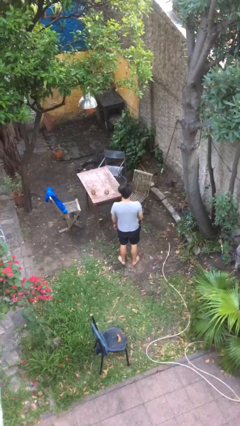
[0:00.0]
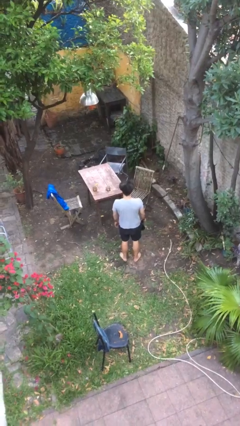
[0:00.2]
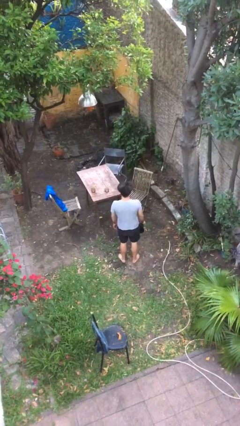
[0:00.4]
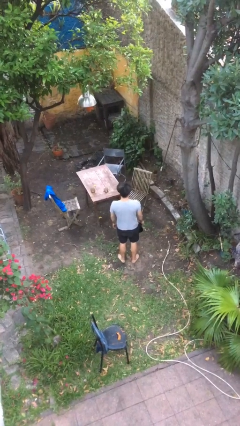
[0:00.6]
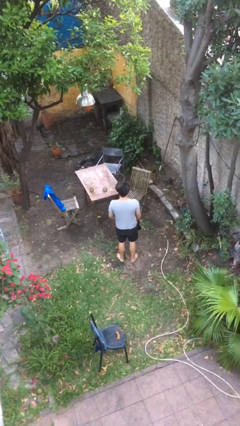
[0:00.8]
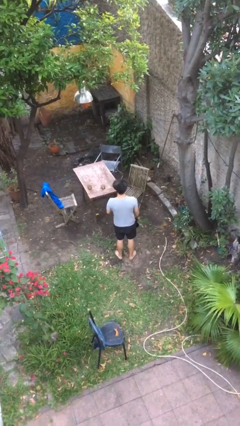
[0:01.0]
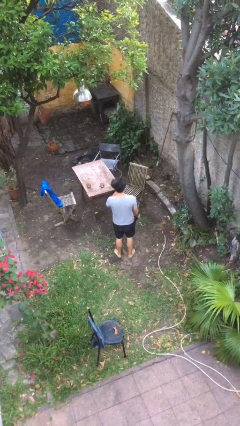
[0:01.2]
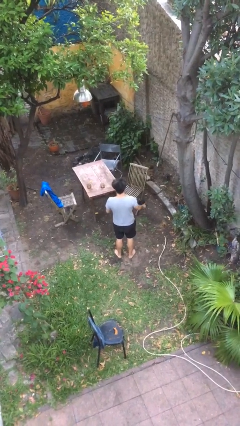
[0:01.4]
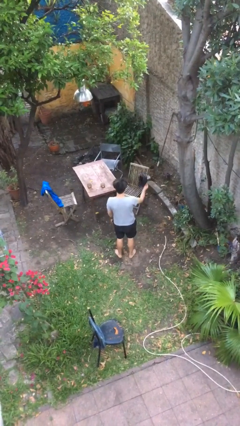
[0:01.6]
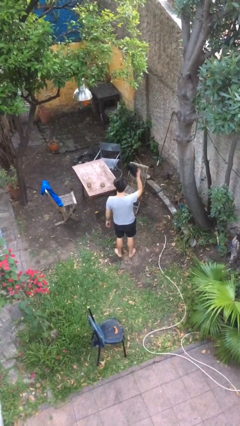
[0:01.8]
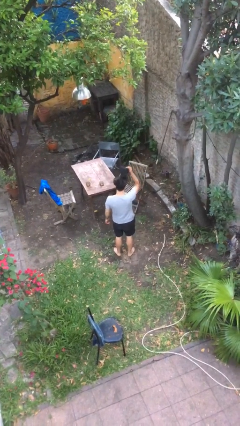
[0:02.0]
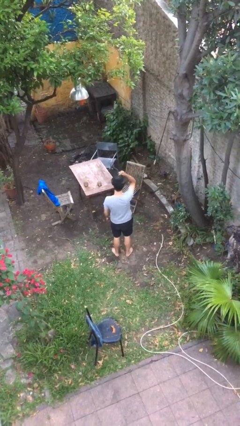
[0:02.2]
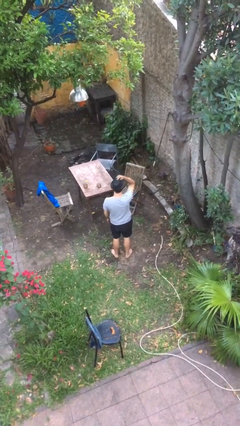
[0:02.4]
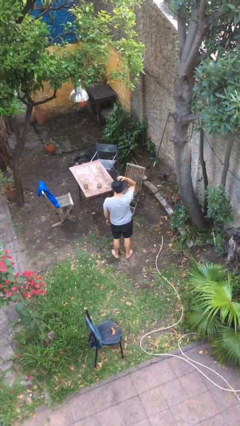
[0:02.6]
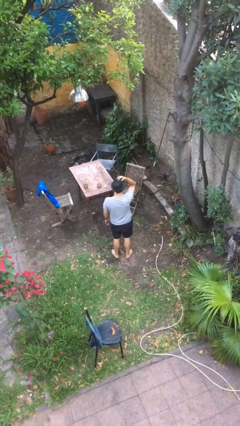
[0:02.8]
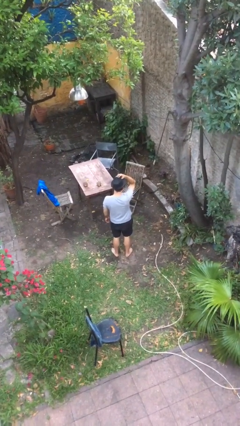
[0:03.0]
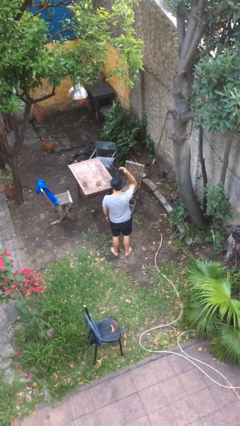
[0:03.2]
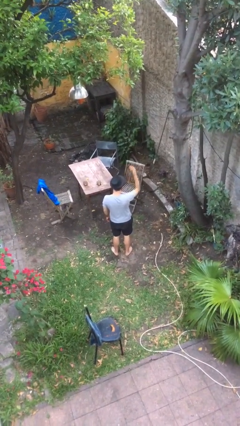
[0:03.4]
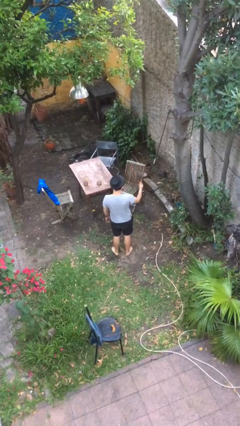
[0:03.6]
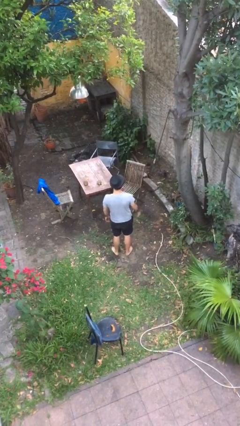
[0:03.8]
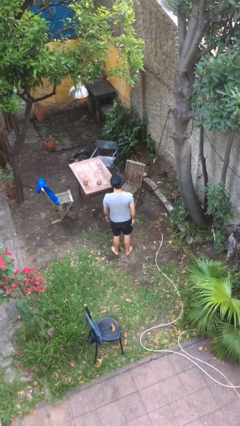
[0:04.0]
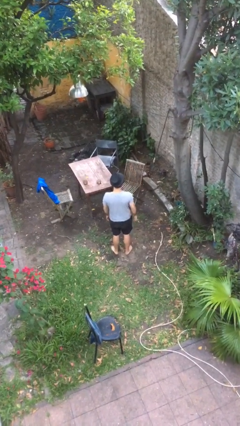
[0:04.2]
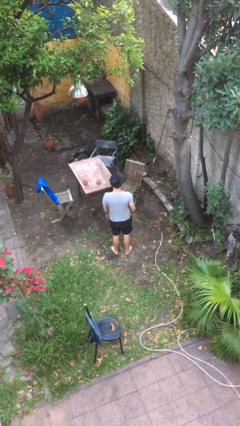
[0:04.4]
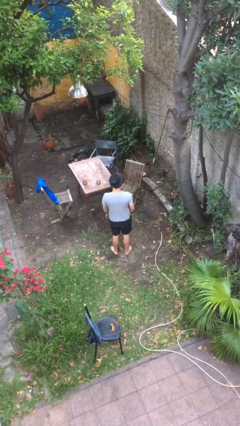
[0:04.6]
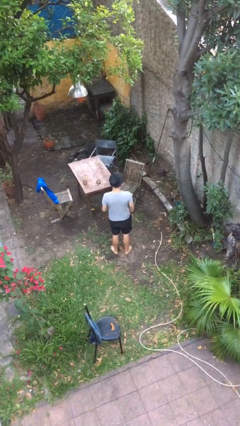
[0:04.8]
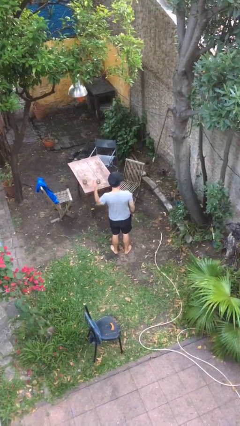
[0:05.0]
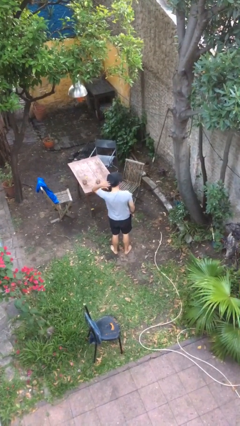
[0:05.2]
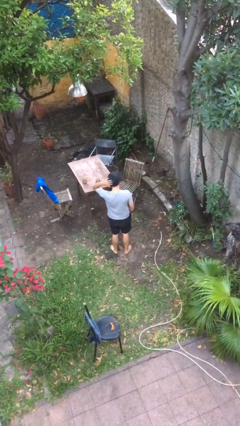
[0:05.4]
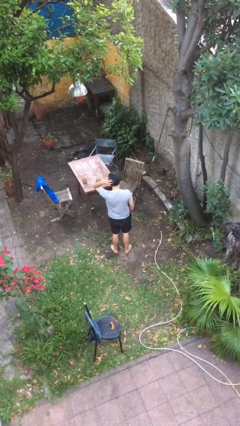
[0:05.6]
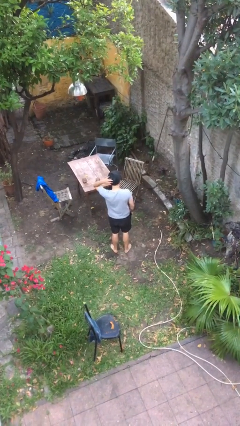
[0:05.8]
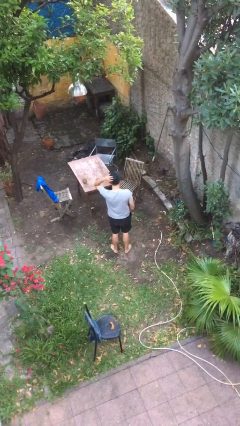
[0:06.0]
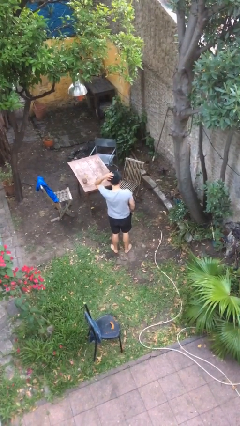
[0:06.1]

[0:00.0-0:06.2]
person puts on hat

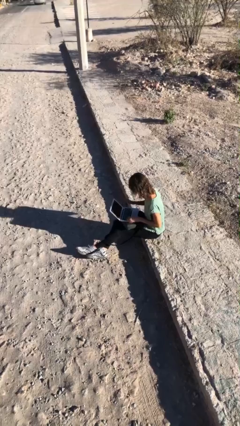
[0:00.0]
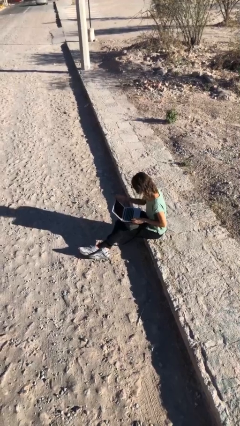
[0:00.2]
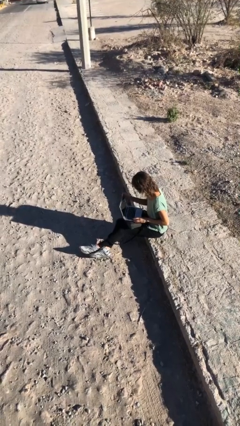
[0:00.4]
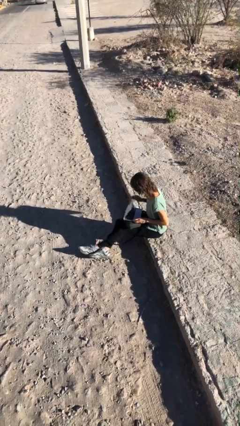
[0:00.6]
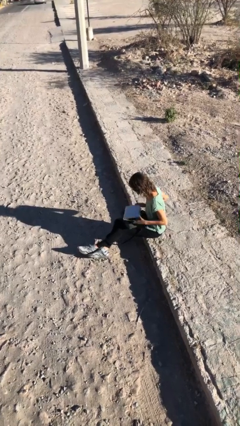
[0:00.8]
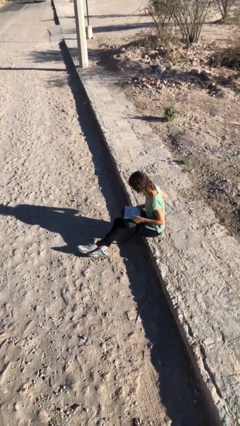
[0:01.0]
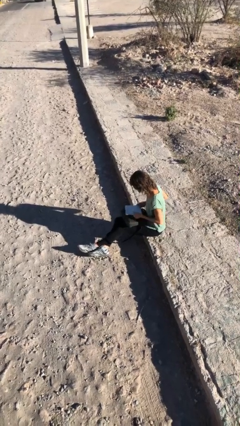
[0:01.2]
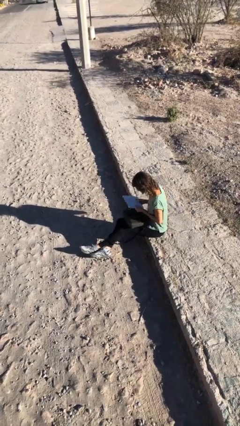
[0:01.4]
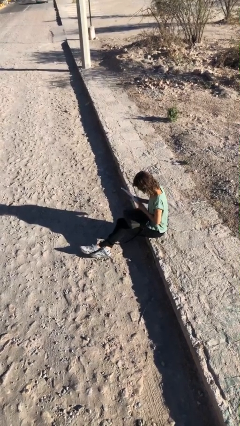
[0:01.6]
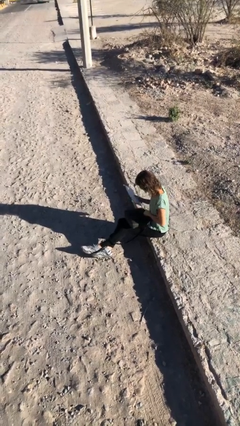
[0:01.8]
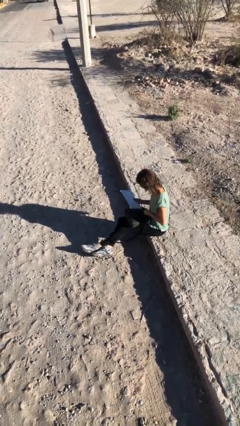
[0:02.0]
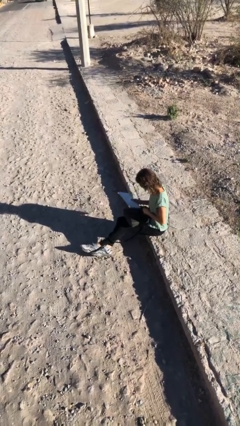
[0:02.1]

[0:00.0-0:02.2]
person interacts with laptop

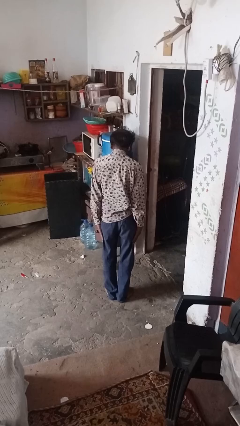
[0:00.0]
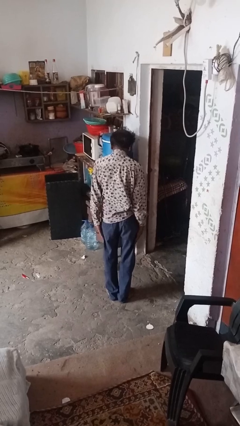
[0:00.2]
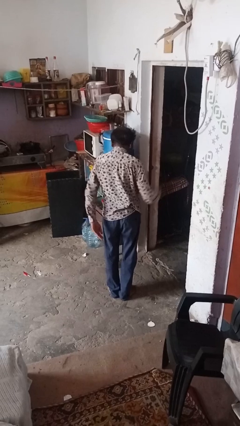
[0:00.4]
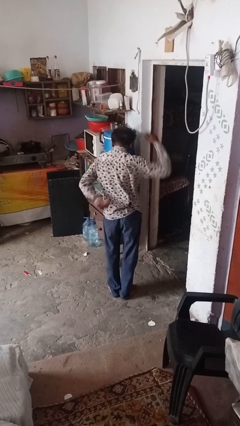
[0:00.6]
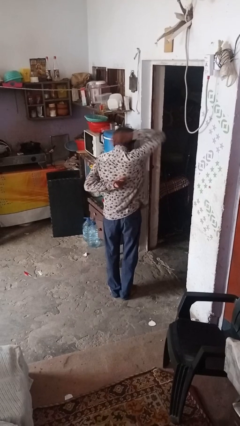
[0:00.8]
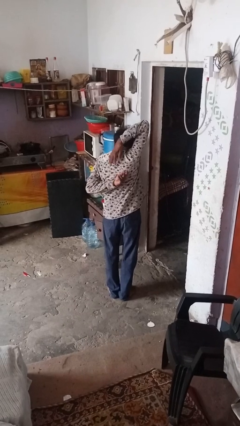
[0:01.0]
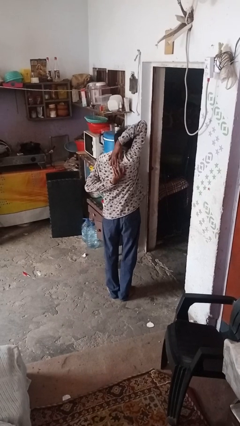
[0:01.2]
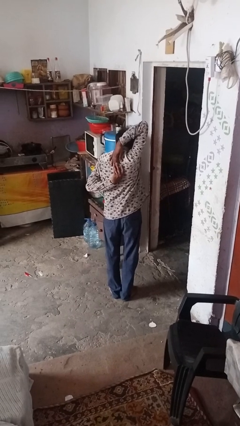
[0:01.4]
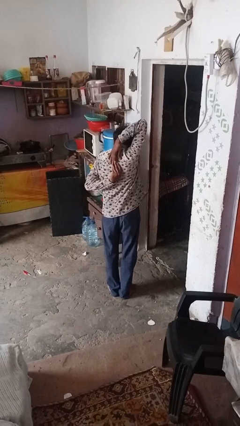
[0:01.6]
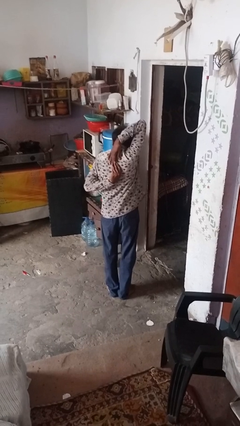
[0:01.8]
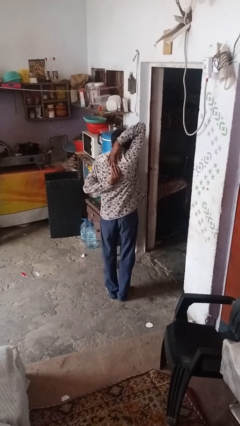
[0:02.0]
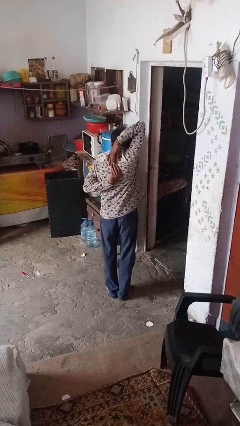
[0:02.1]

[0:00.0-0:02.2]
person stretches back

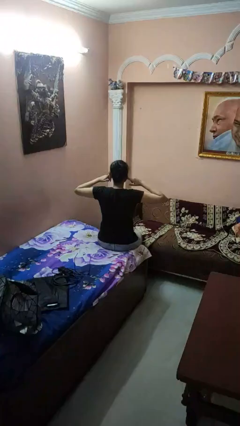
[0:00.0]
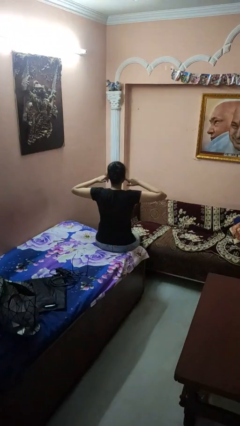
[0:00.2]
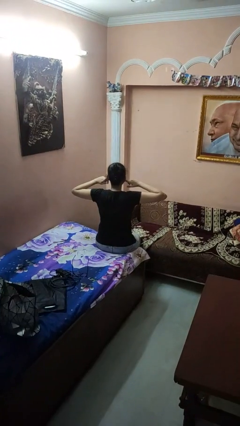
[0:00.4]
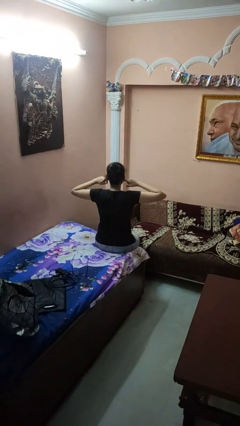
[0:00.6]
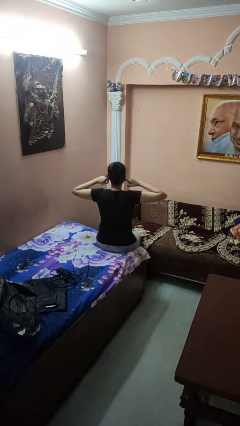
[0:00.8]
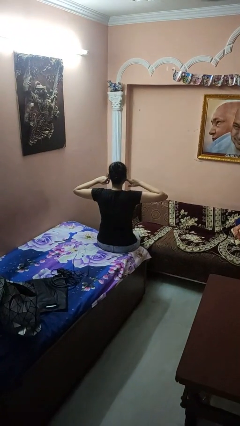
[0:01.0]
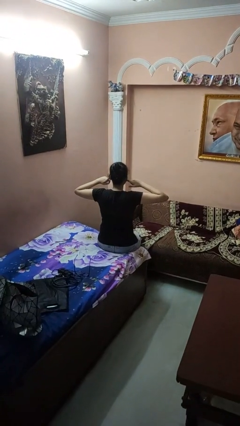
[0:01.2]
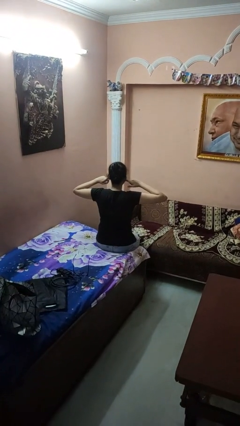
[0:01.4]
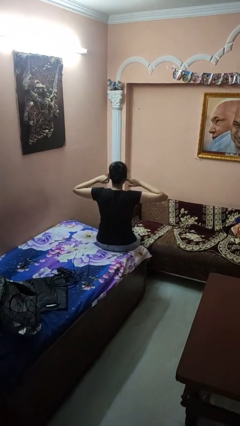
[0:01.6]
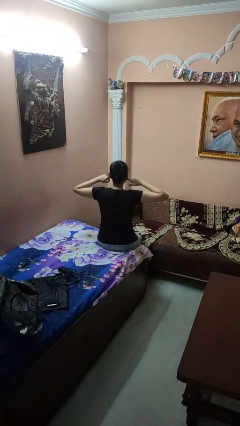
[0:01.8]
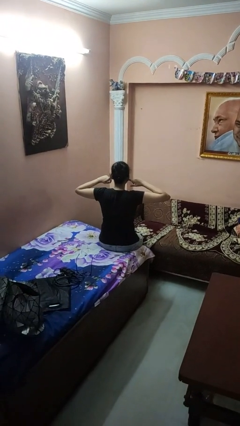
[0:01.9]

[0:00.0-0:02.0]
person puts fingers in ear

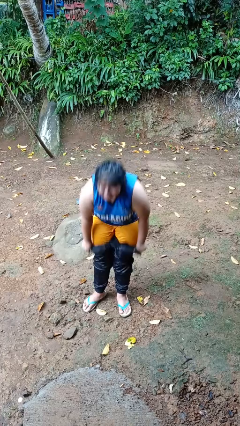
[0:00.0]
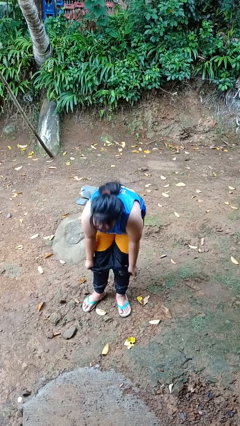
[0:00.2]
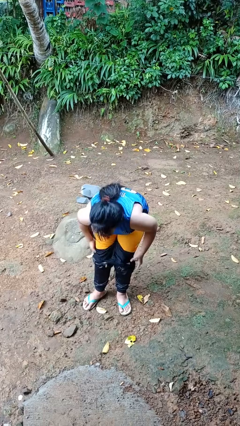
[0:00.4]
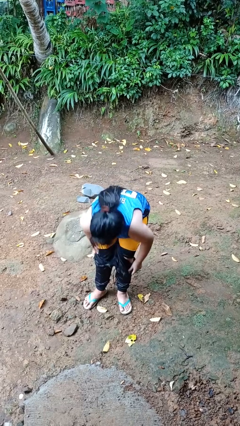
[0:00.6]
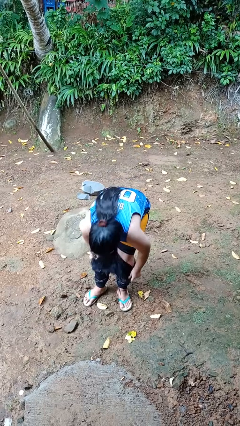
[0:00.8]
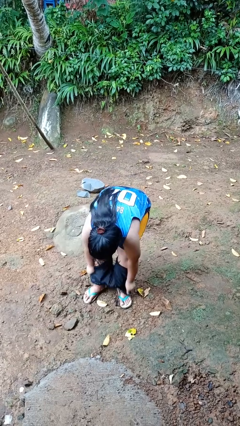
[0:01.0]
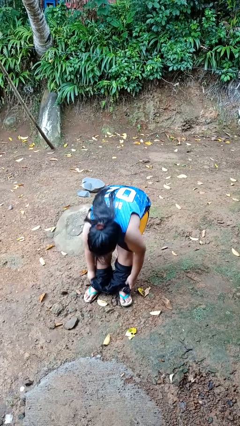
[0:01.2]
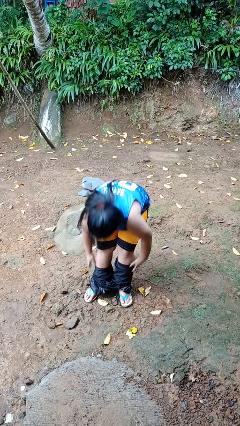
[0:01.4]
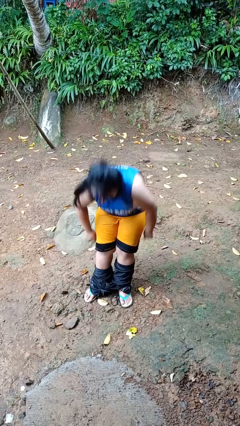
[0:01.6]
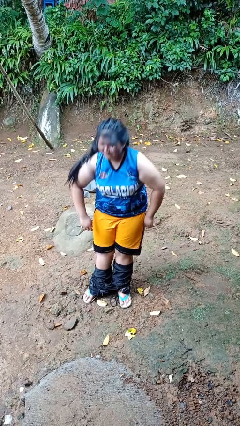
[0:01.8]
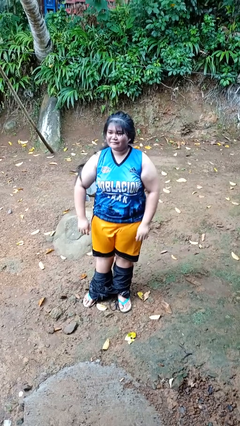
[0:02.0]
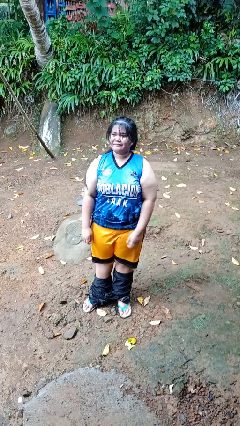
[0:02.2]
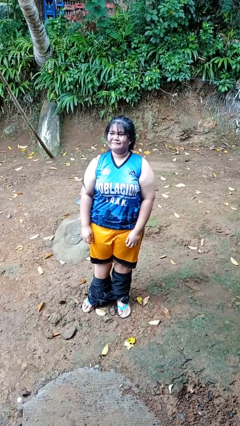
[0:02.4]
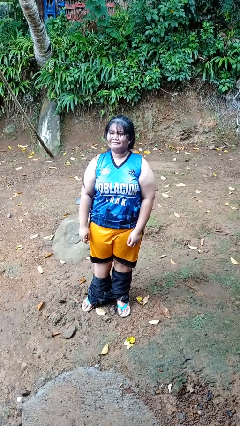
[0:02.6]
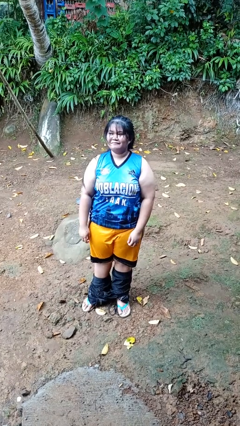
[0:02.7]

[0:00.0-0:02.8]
person takes off pants

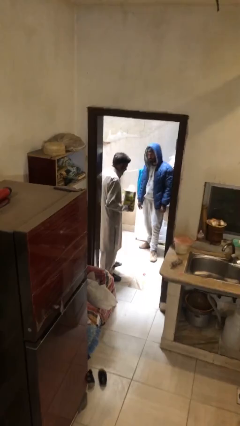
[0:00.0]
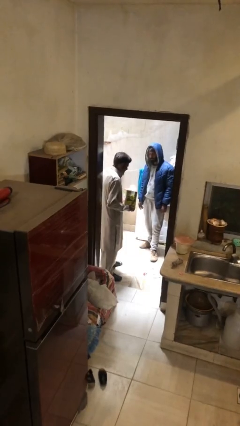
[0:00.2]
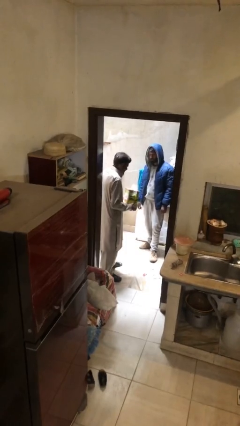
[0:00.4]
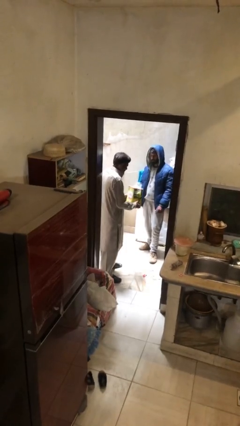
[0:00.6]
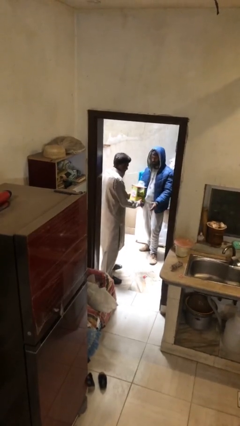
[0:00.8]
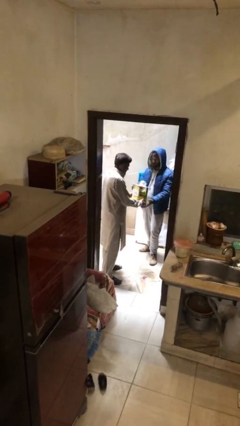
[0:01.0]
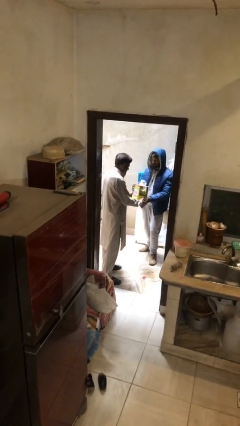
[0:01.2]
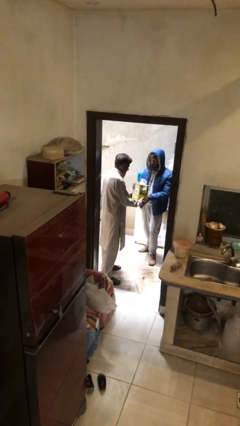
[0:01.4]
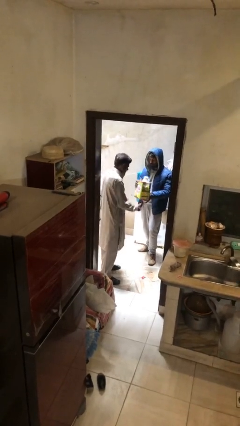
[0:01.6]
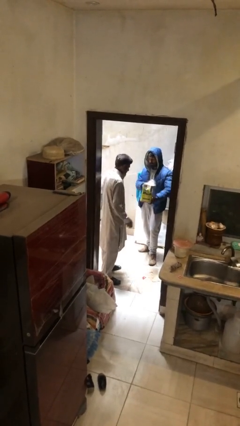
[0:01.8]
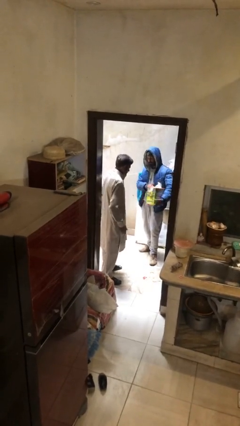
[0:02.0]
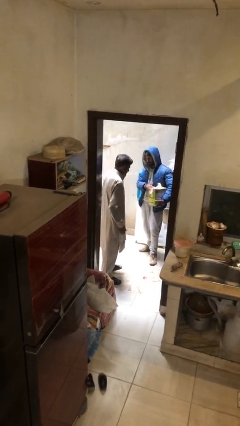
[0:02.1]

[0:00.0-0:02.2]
person transfers object to person
